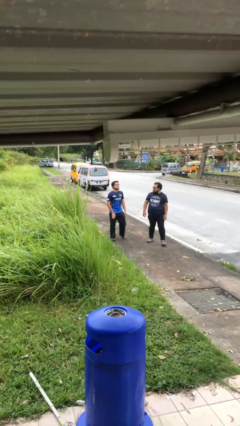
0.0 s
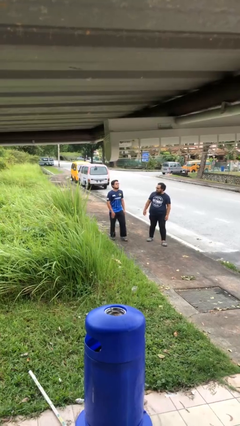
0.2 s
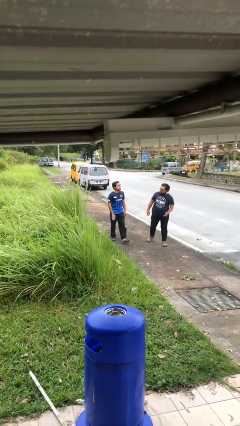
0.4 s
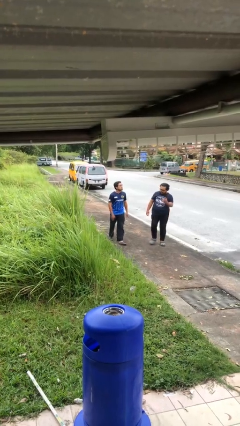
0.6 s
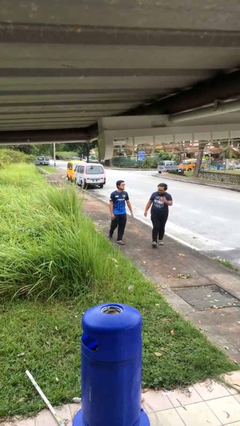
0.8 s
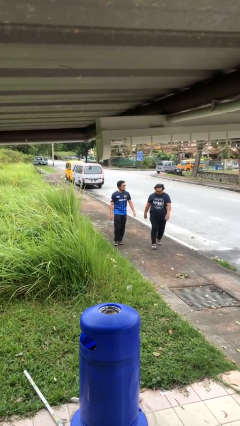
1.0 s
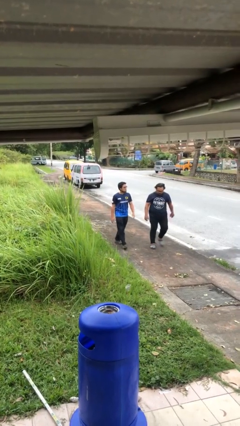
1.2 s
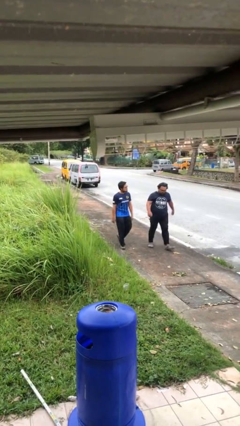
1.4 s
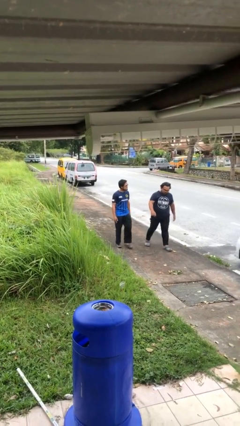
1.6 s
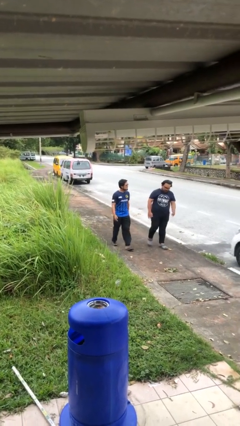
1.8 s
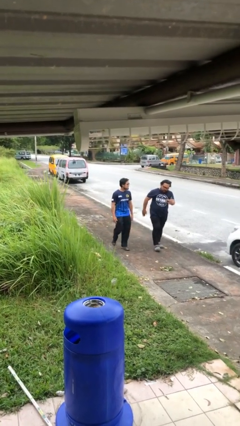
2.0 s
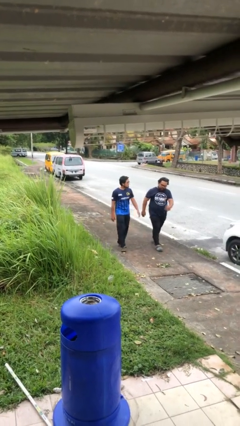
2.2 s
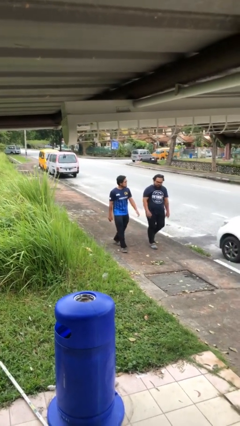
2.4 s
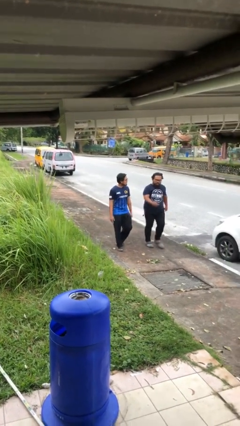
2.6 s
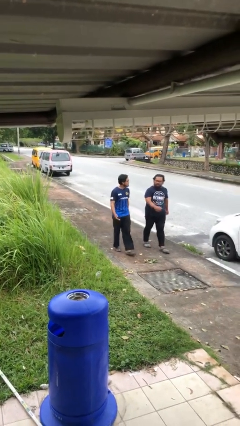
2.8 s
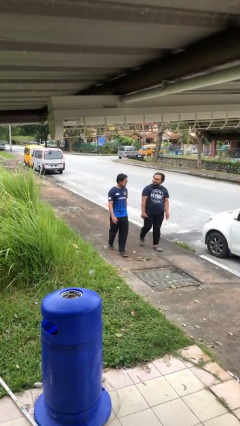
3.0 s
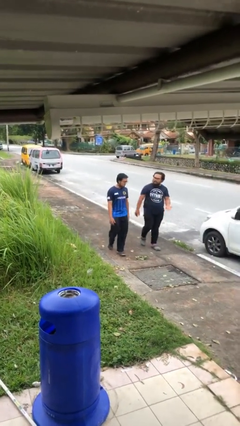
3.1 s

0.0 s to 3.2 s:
person talks to person

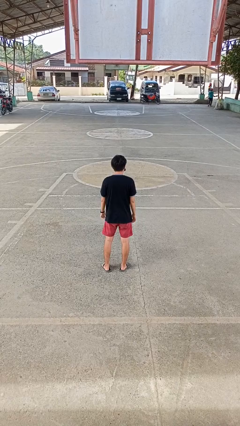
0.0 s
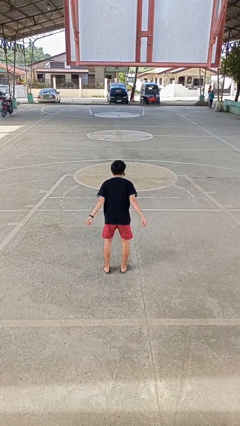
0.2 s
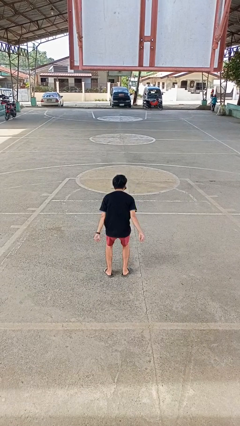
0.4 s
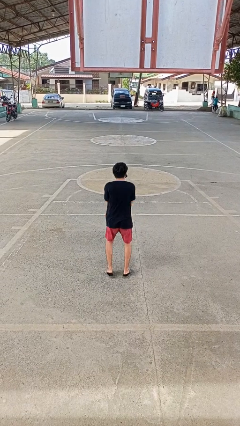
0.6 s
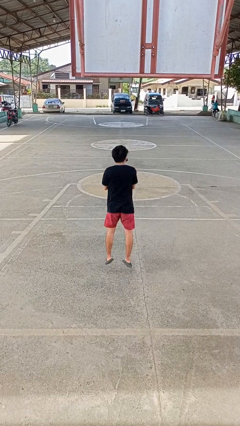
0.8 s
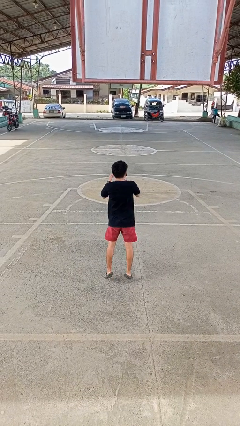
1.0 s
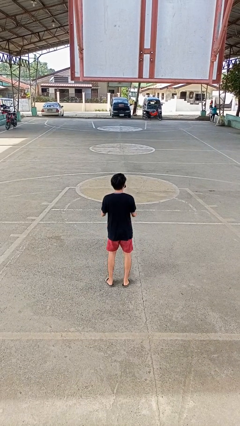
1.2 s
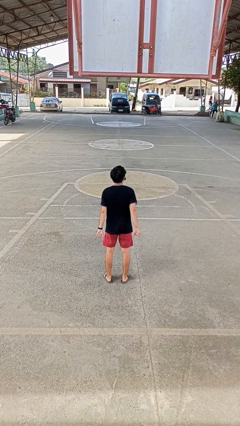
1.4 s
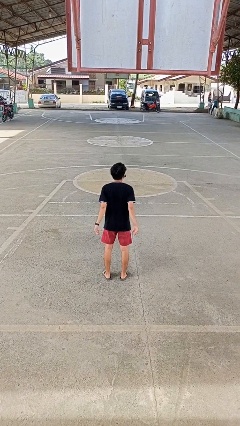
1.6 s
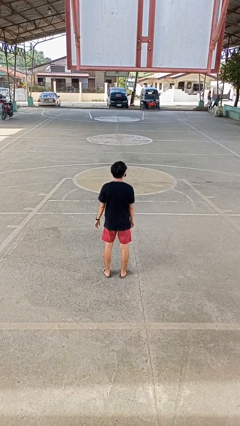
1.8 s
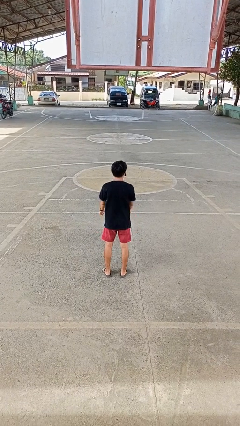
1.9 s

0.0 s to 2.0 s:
person jumps

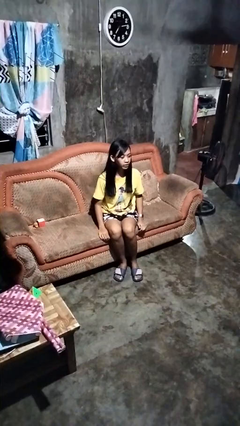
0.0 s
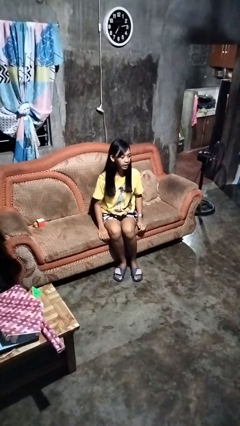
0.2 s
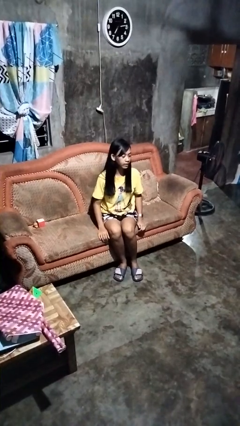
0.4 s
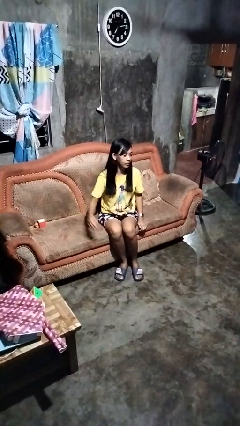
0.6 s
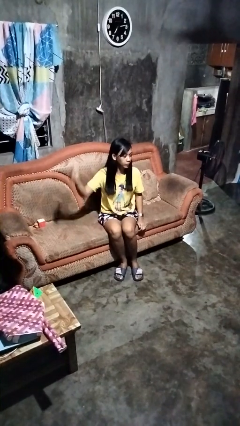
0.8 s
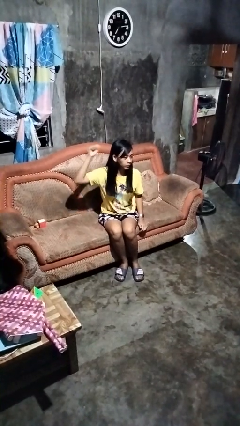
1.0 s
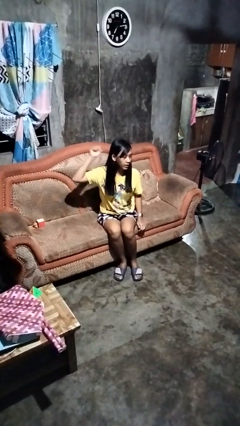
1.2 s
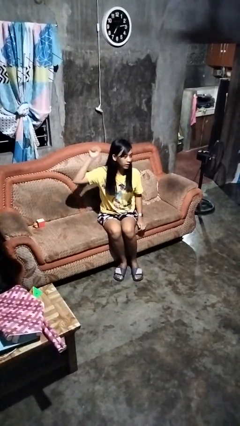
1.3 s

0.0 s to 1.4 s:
person gestures behind me

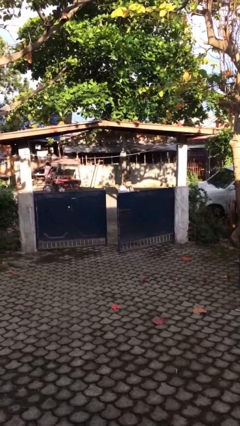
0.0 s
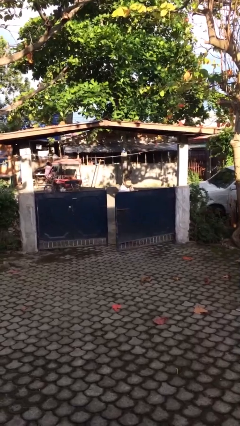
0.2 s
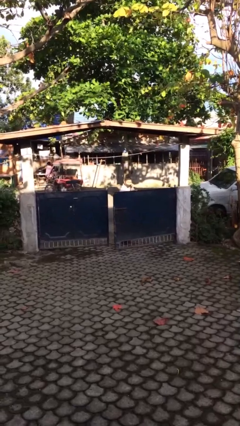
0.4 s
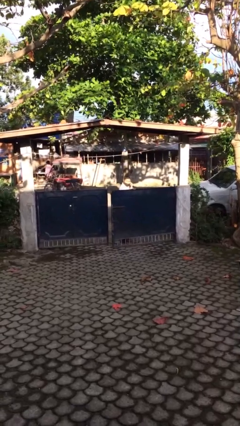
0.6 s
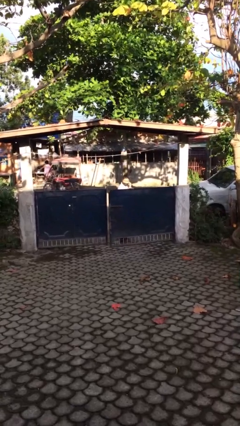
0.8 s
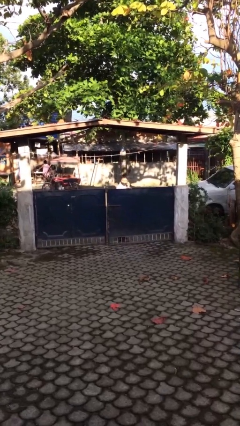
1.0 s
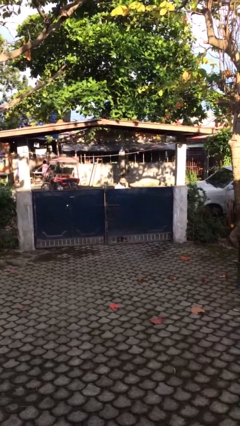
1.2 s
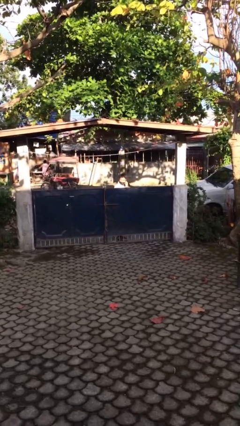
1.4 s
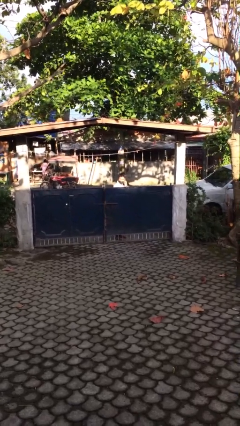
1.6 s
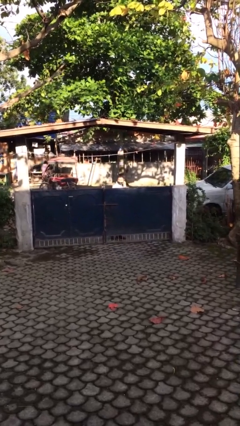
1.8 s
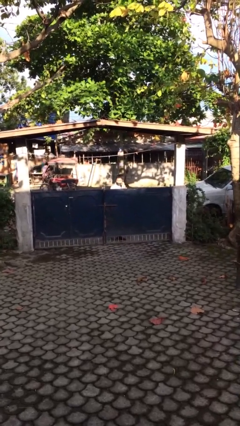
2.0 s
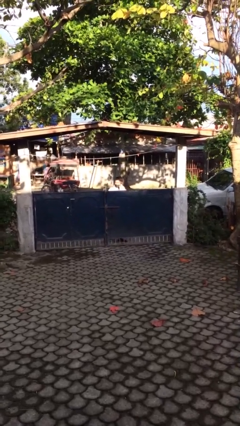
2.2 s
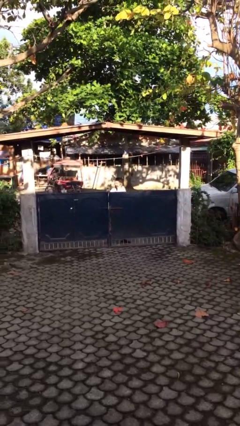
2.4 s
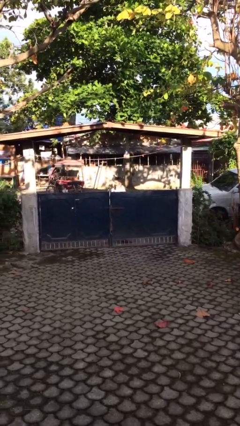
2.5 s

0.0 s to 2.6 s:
person closes facility door

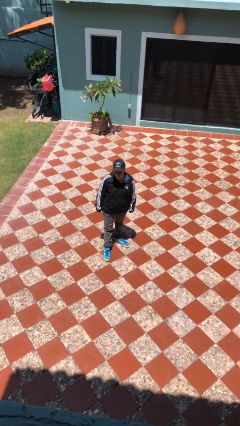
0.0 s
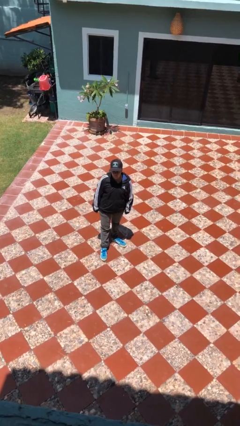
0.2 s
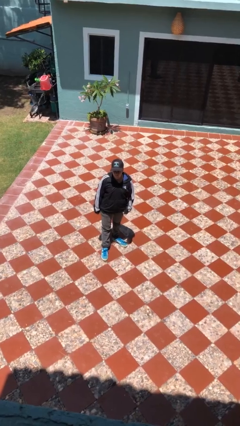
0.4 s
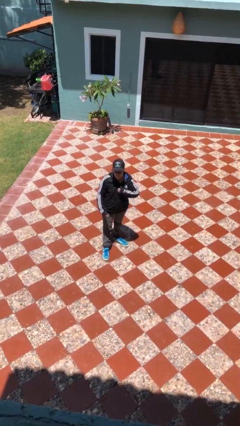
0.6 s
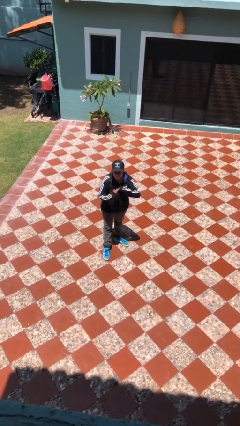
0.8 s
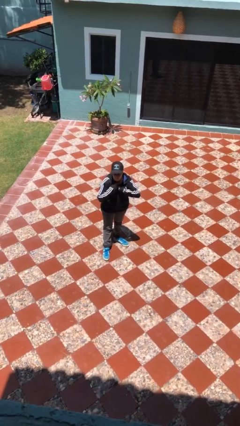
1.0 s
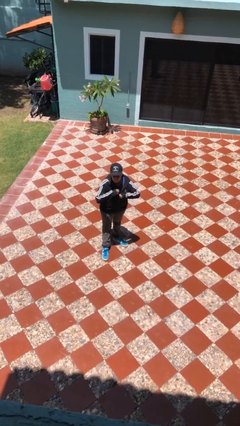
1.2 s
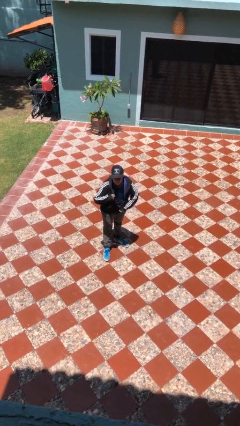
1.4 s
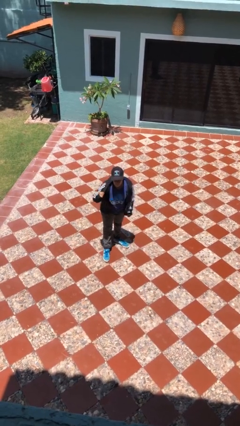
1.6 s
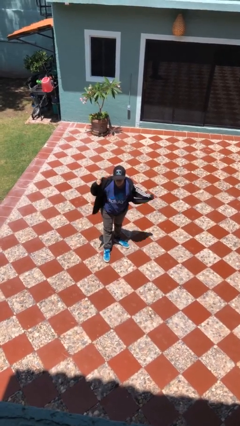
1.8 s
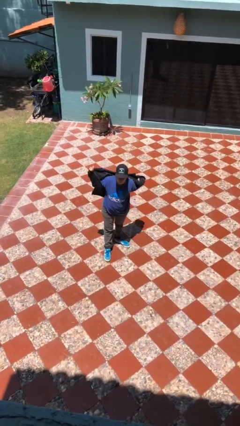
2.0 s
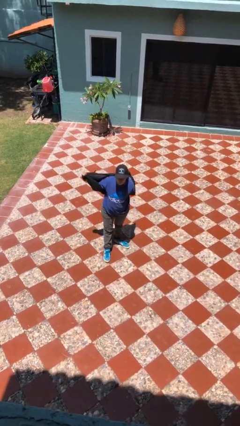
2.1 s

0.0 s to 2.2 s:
person unzips jacket

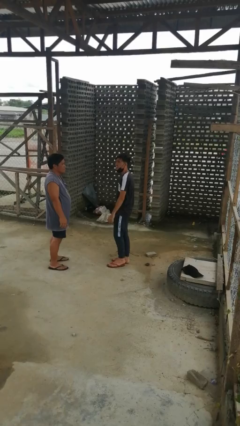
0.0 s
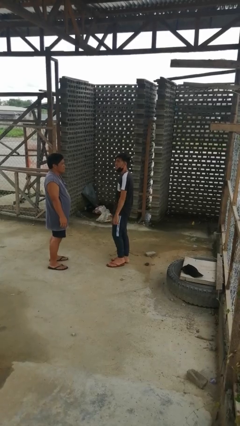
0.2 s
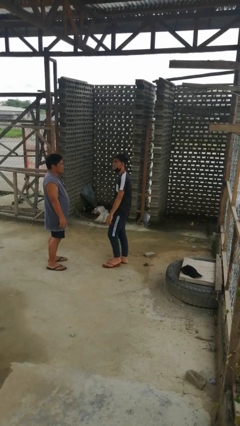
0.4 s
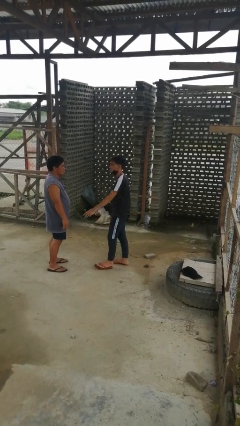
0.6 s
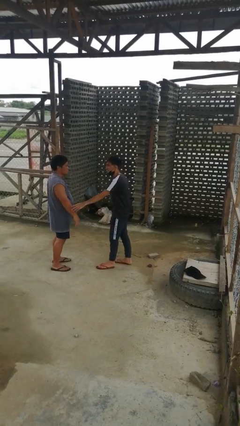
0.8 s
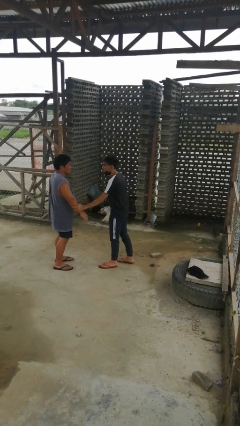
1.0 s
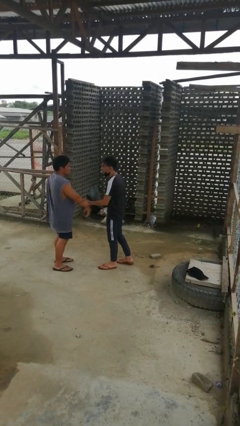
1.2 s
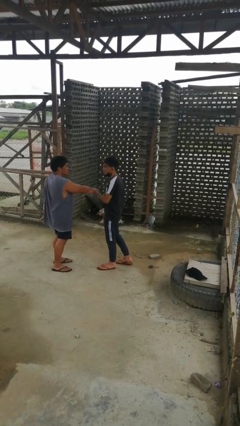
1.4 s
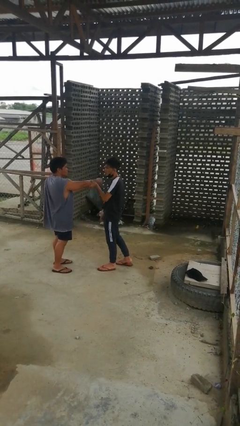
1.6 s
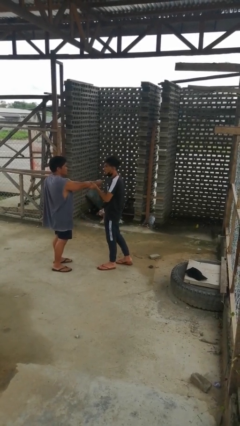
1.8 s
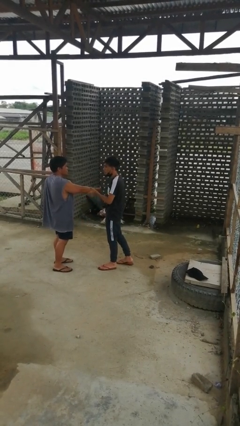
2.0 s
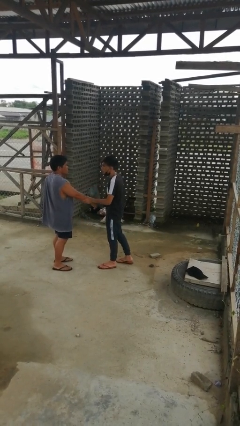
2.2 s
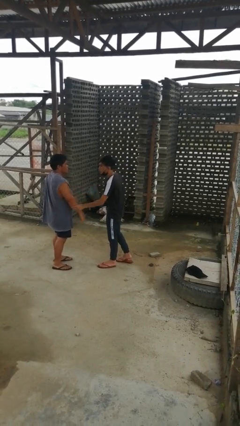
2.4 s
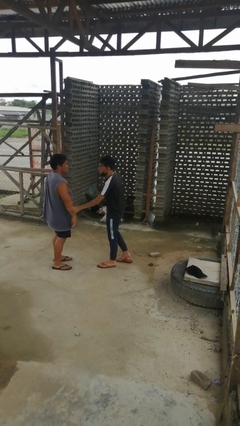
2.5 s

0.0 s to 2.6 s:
person grabs person by forearm

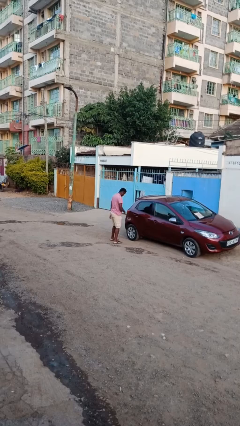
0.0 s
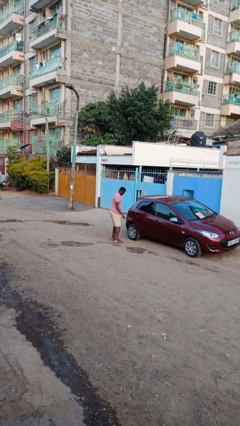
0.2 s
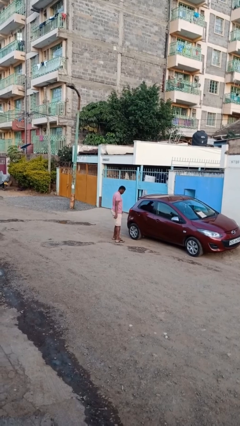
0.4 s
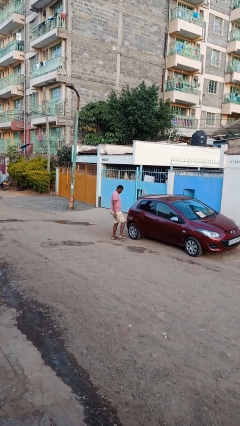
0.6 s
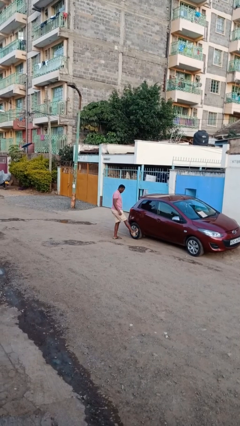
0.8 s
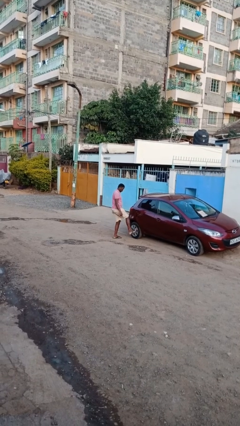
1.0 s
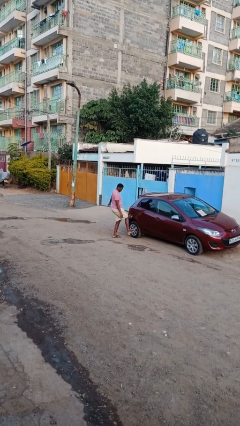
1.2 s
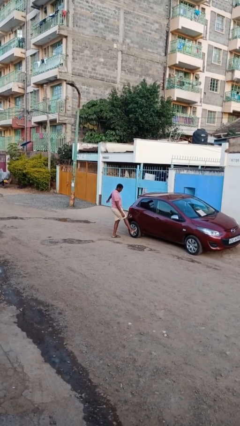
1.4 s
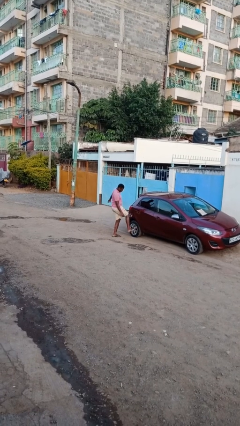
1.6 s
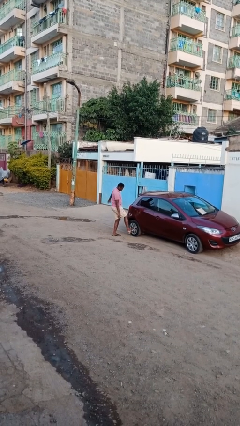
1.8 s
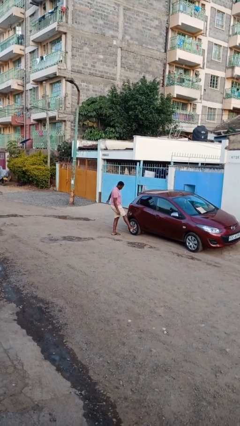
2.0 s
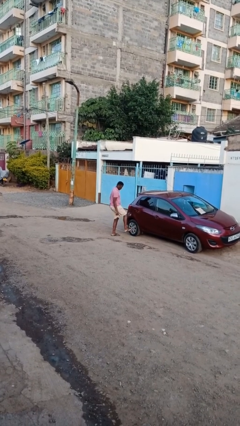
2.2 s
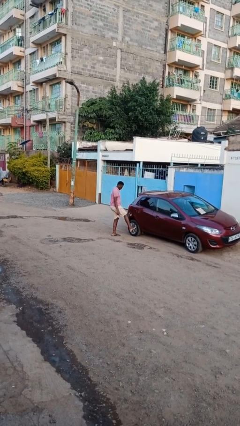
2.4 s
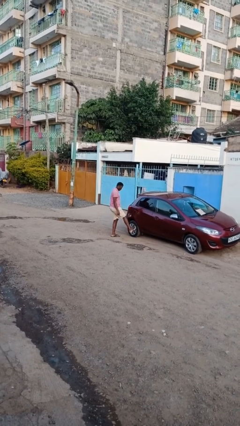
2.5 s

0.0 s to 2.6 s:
person kicks car tires

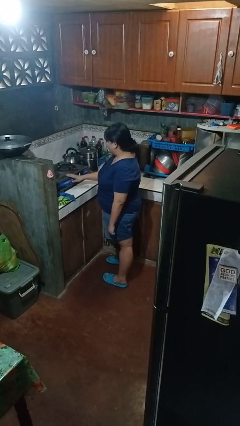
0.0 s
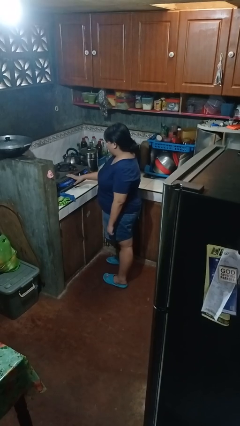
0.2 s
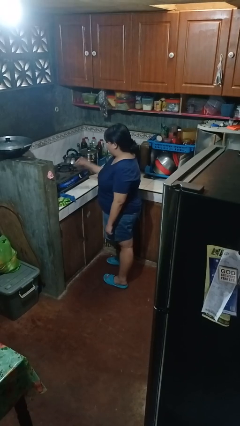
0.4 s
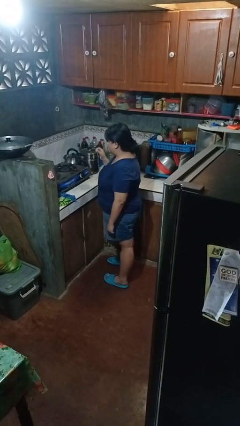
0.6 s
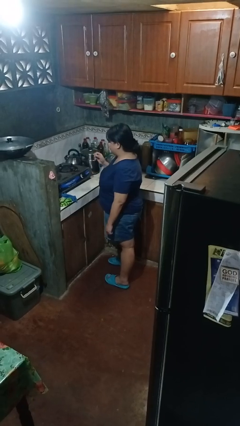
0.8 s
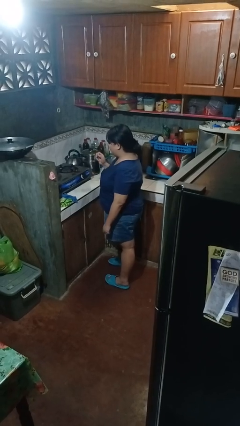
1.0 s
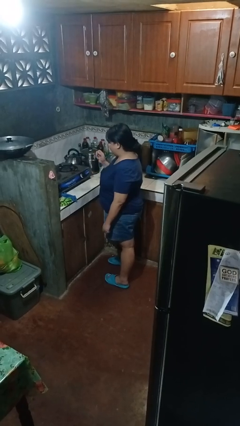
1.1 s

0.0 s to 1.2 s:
person burns hand
